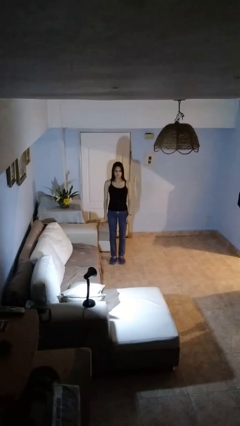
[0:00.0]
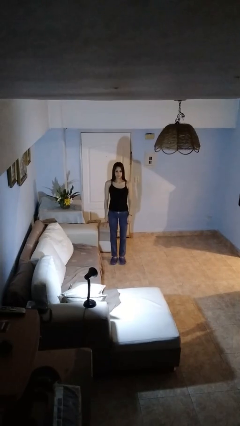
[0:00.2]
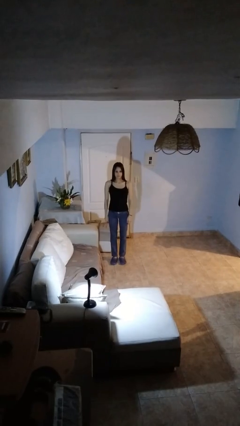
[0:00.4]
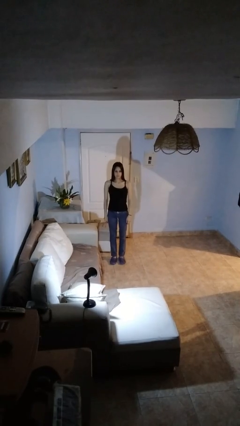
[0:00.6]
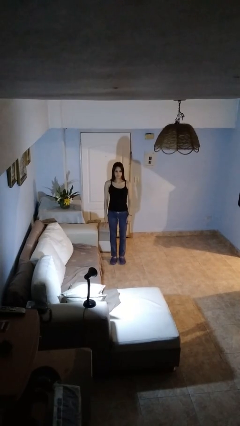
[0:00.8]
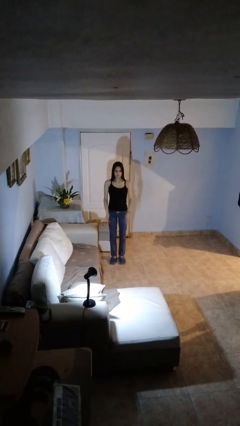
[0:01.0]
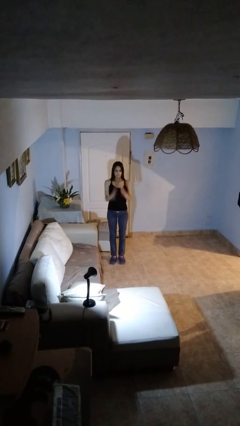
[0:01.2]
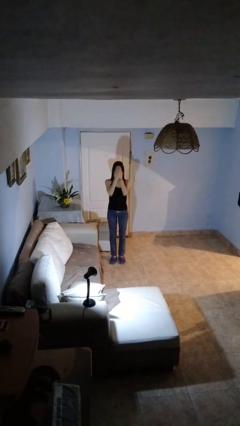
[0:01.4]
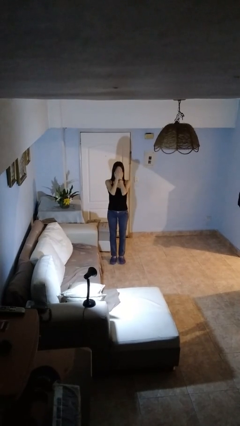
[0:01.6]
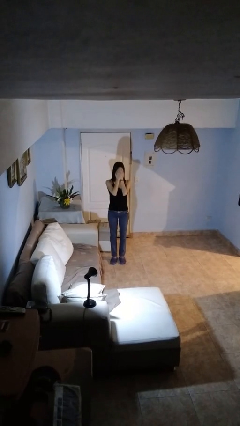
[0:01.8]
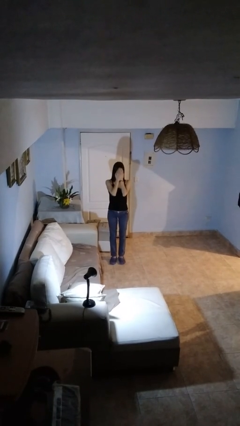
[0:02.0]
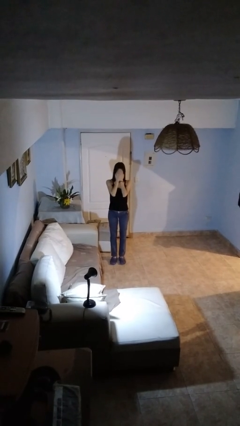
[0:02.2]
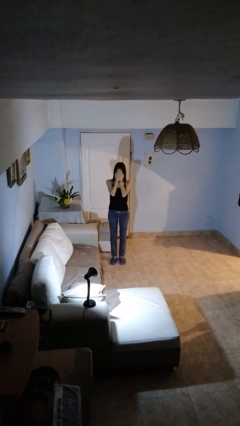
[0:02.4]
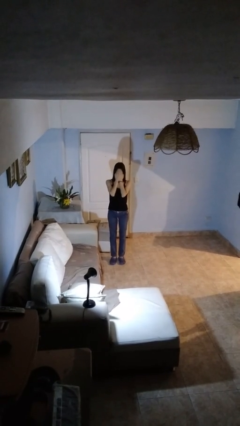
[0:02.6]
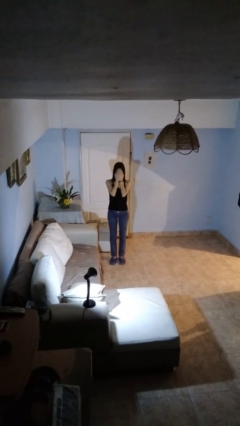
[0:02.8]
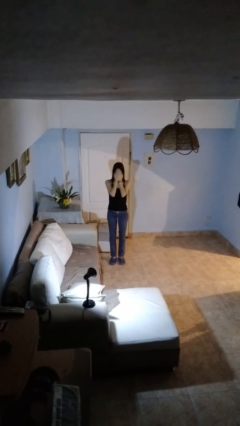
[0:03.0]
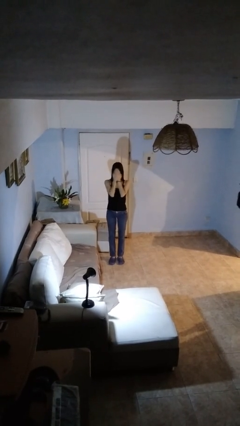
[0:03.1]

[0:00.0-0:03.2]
person covers face with hands

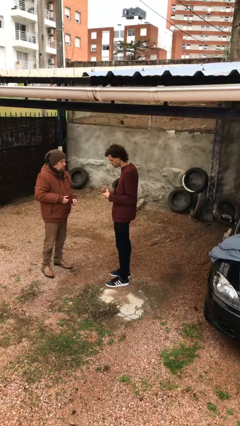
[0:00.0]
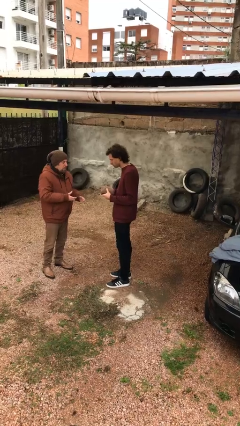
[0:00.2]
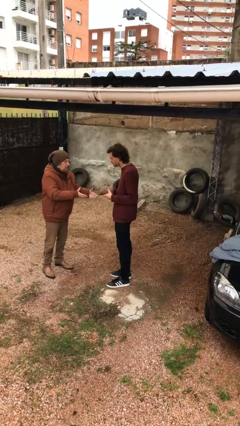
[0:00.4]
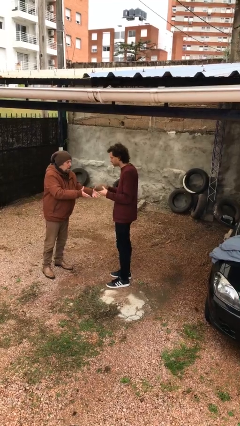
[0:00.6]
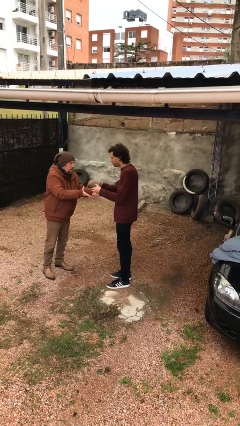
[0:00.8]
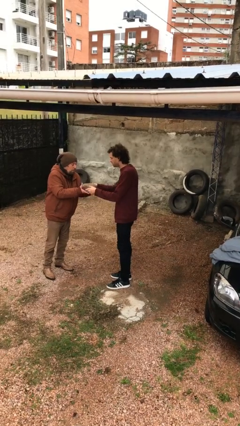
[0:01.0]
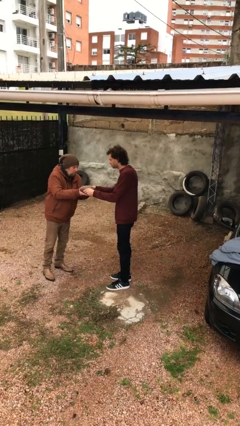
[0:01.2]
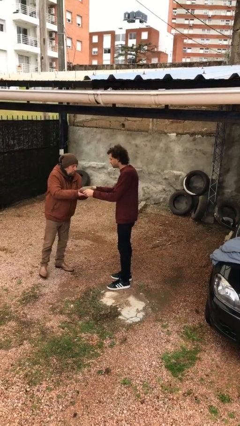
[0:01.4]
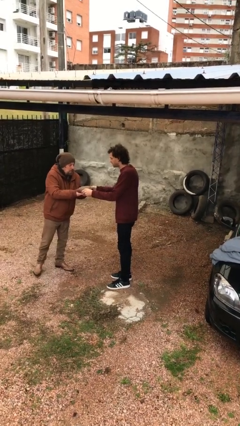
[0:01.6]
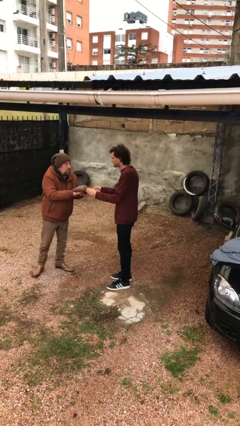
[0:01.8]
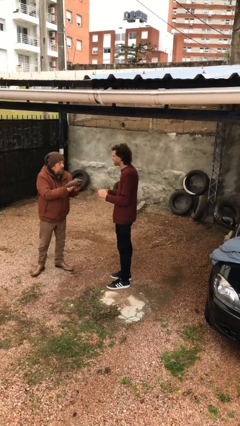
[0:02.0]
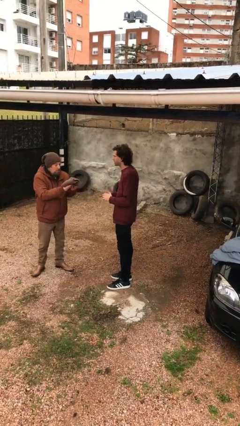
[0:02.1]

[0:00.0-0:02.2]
person transfers object to person

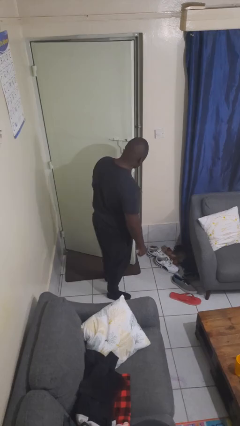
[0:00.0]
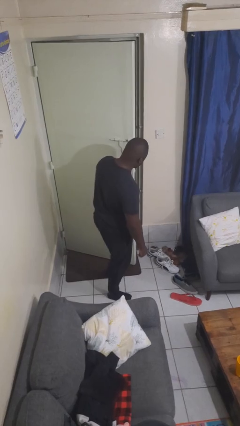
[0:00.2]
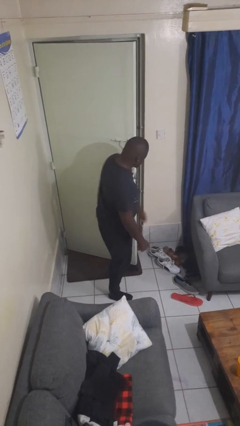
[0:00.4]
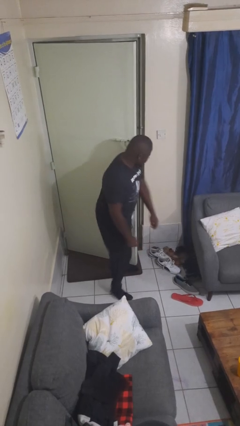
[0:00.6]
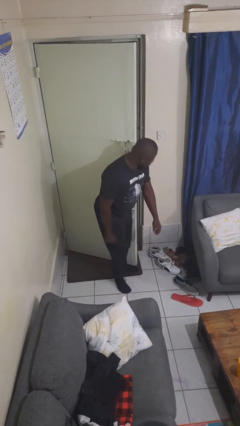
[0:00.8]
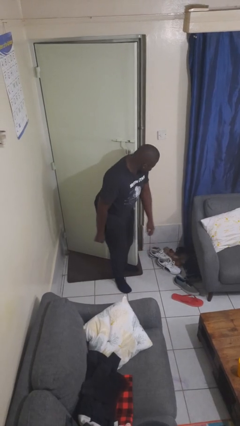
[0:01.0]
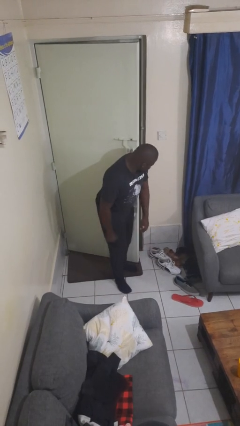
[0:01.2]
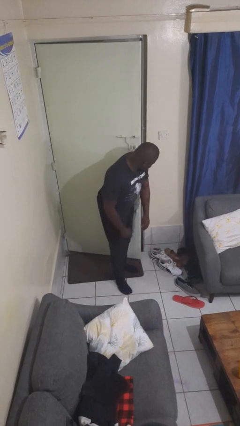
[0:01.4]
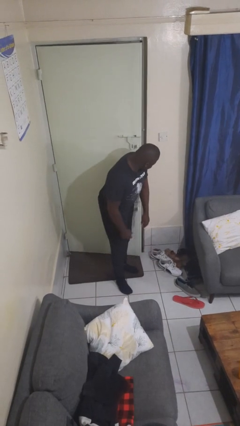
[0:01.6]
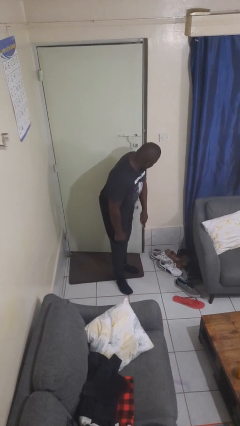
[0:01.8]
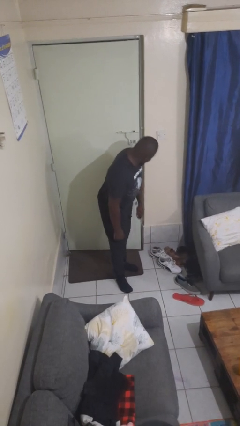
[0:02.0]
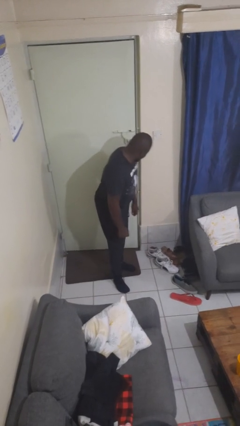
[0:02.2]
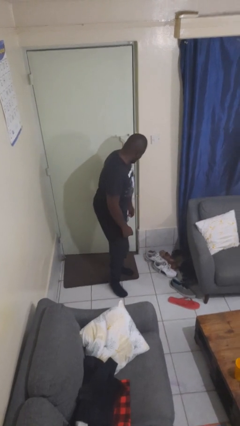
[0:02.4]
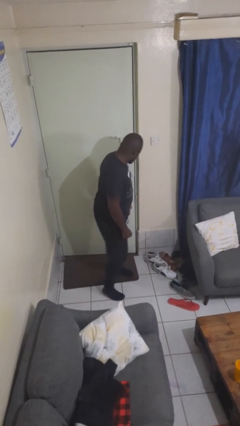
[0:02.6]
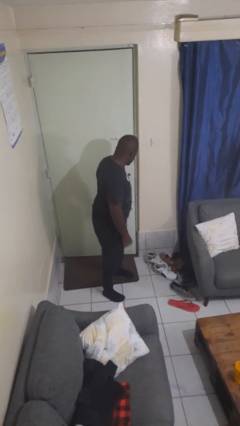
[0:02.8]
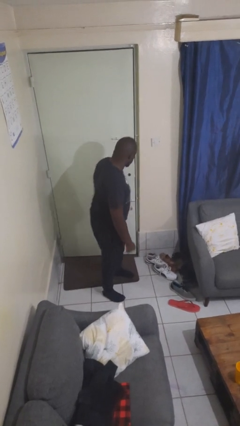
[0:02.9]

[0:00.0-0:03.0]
person closes door with hip

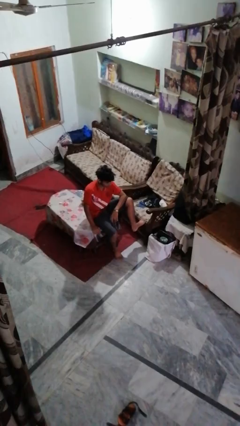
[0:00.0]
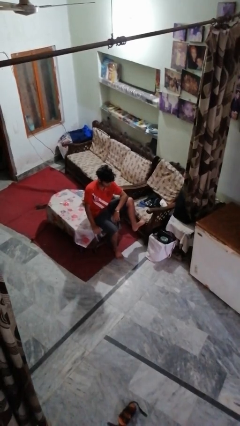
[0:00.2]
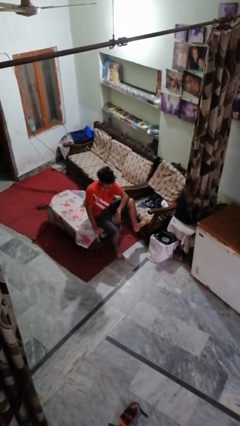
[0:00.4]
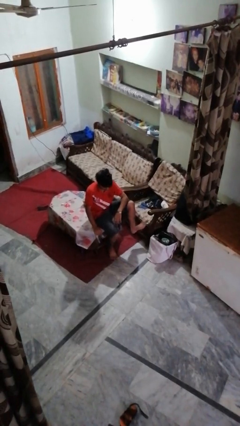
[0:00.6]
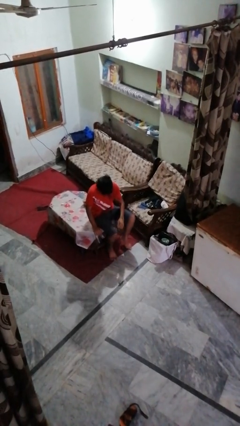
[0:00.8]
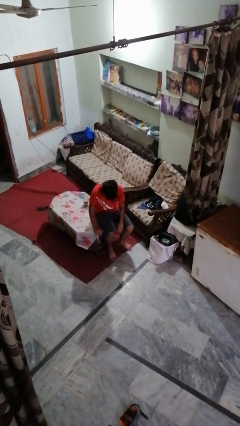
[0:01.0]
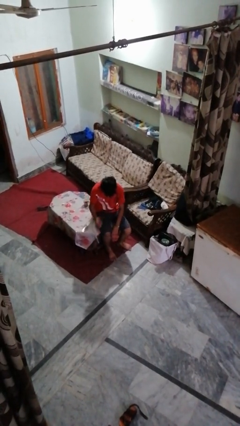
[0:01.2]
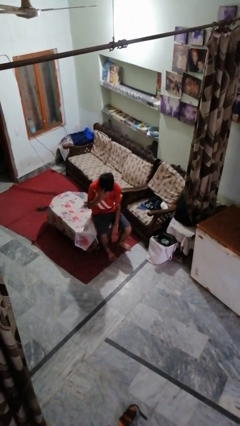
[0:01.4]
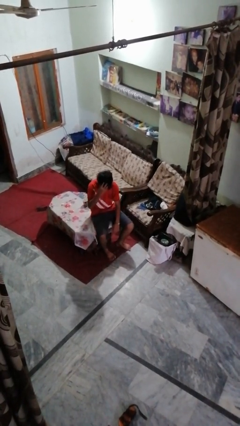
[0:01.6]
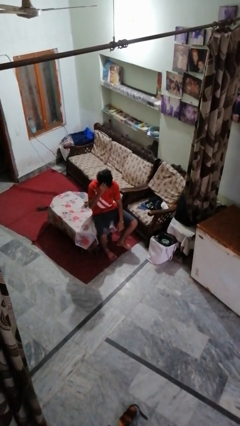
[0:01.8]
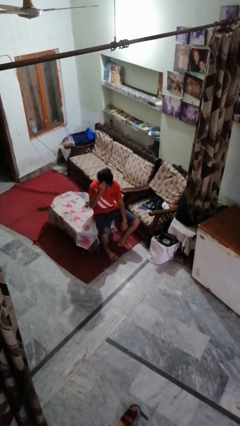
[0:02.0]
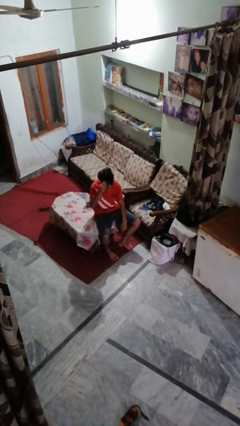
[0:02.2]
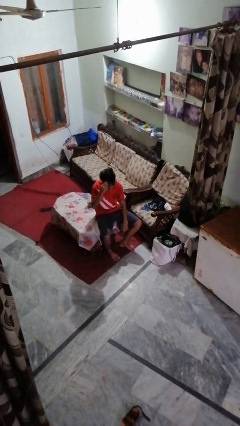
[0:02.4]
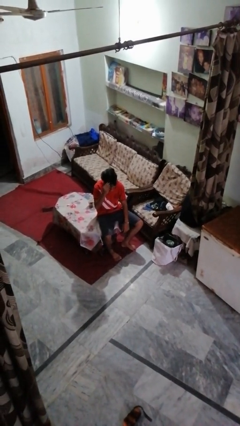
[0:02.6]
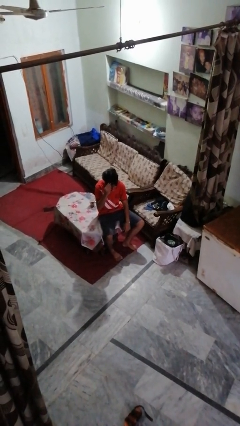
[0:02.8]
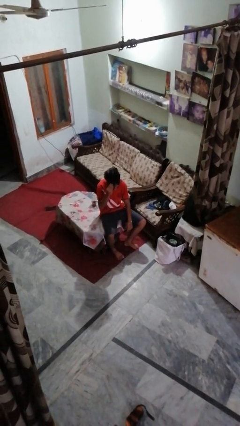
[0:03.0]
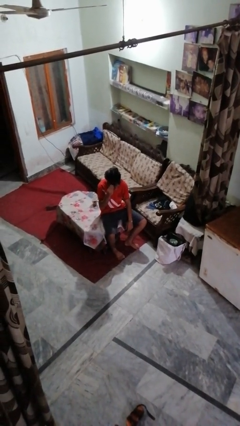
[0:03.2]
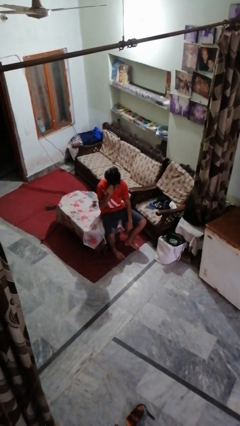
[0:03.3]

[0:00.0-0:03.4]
person strokes hair

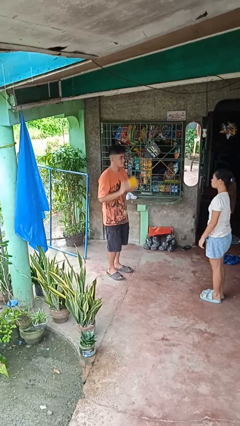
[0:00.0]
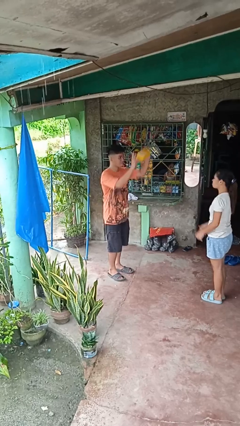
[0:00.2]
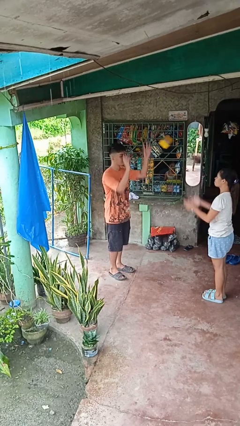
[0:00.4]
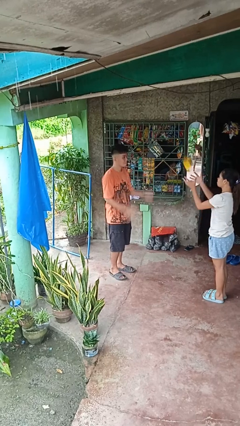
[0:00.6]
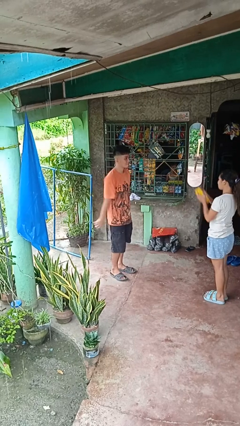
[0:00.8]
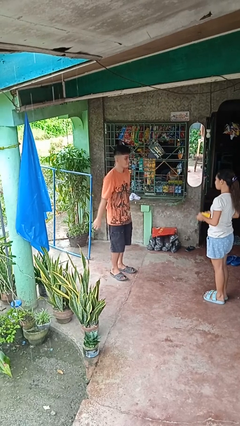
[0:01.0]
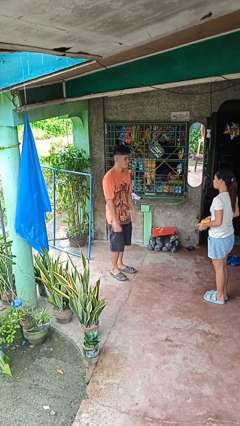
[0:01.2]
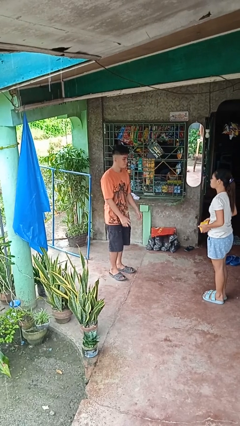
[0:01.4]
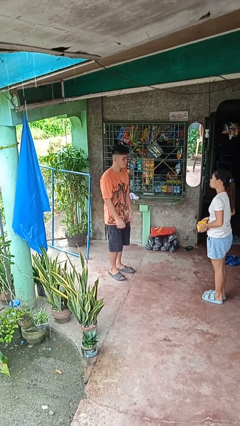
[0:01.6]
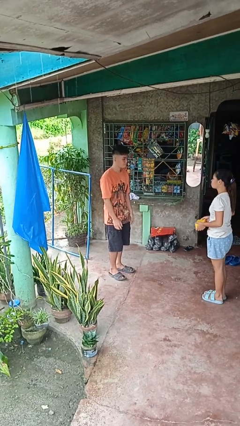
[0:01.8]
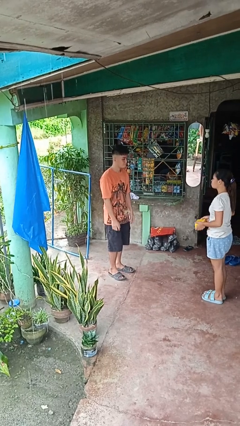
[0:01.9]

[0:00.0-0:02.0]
person throws object to person

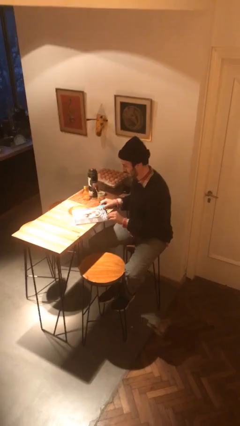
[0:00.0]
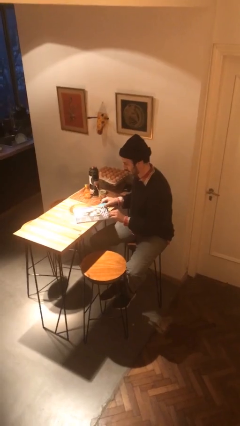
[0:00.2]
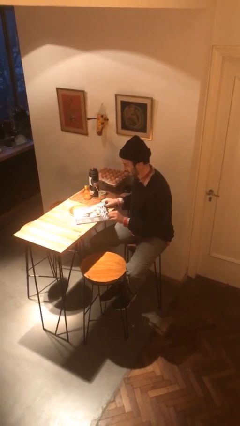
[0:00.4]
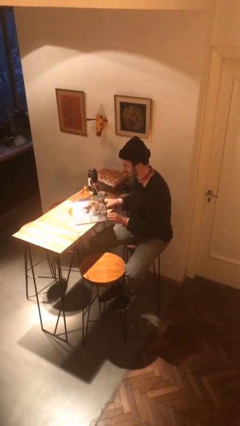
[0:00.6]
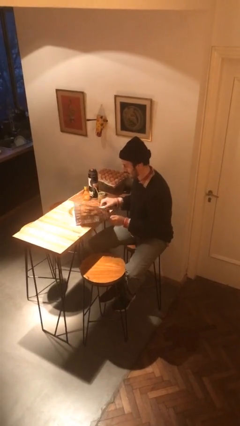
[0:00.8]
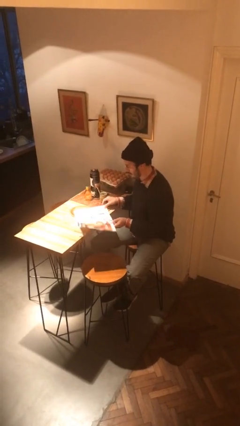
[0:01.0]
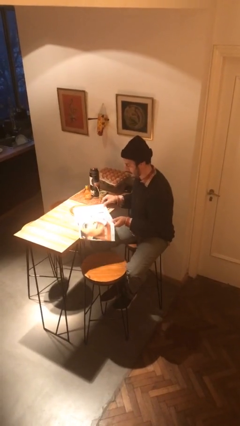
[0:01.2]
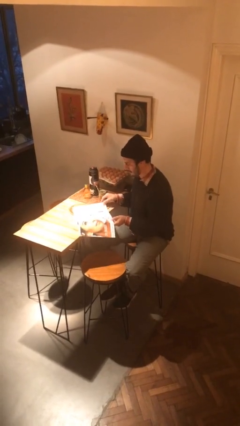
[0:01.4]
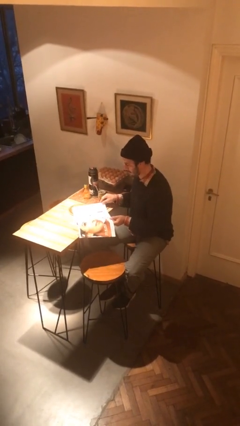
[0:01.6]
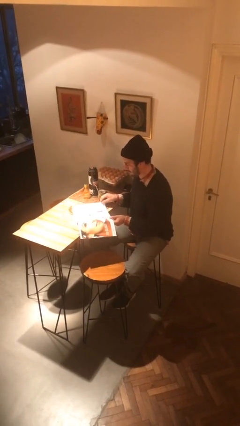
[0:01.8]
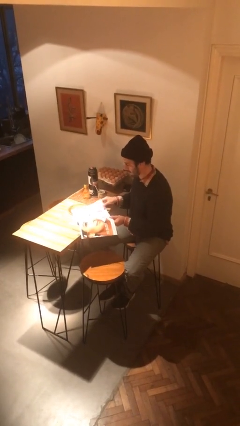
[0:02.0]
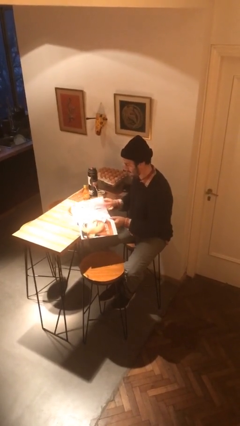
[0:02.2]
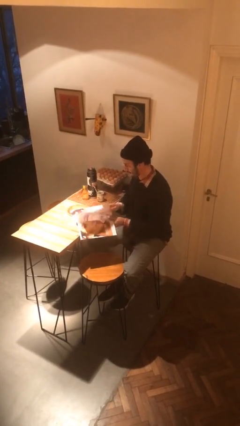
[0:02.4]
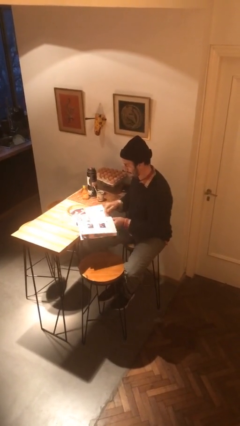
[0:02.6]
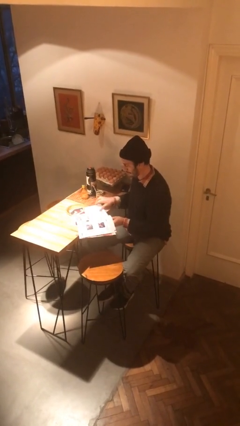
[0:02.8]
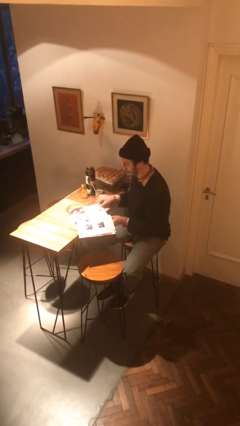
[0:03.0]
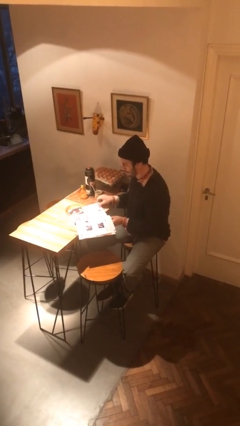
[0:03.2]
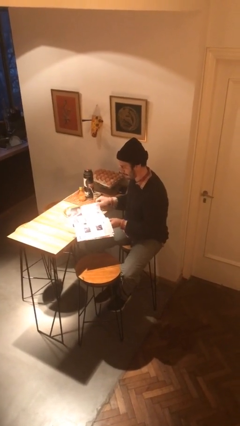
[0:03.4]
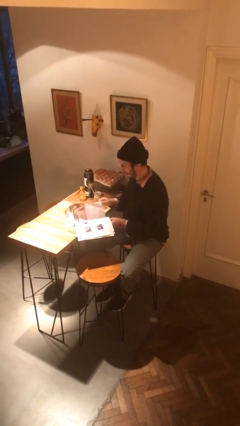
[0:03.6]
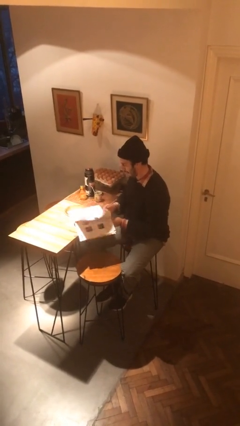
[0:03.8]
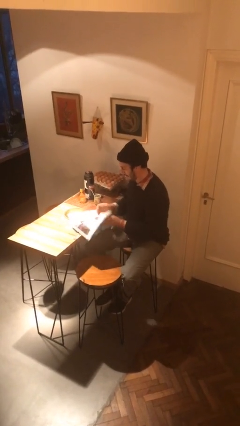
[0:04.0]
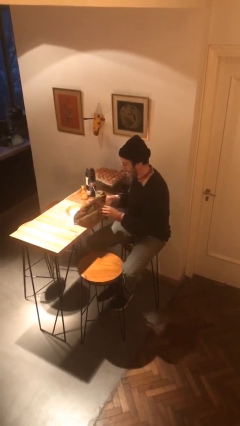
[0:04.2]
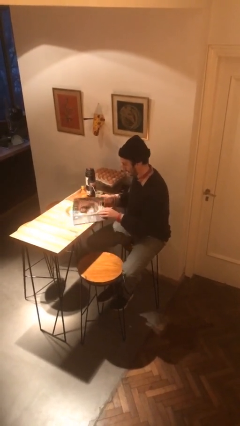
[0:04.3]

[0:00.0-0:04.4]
person reads magazine
